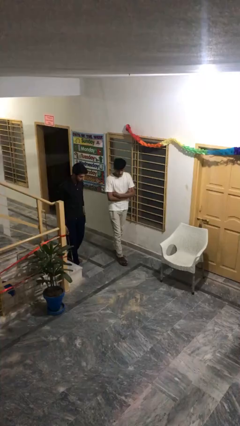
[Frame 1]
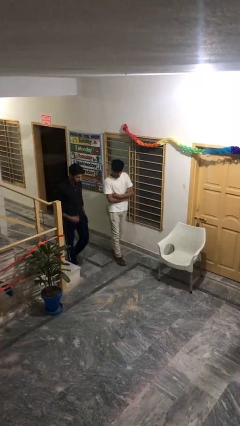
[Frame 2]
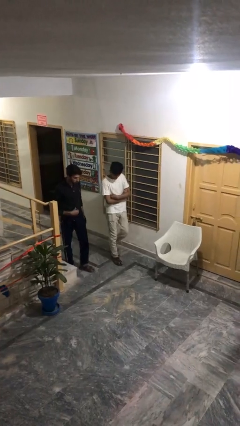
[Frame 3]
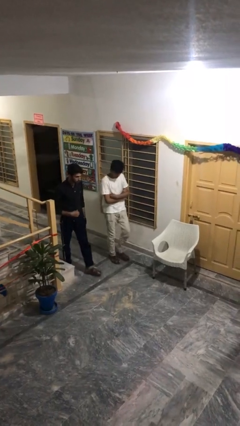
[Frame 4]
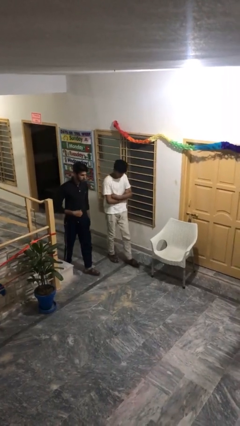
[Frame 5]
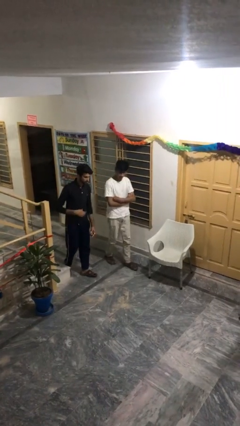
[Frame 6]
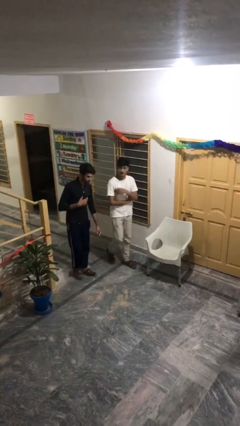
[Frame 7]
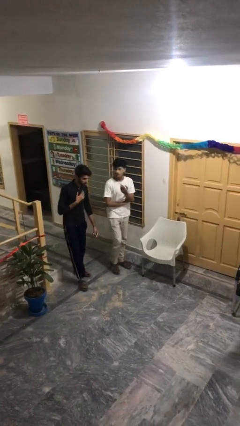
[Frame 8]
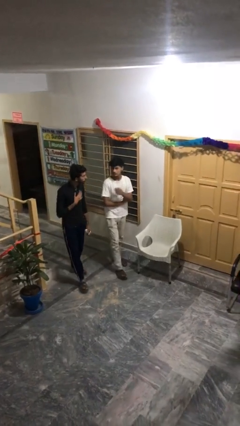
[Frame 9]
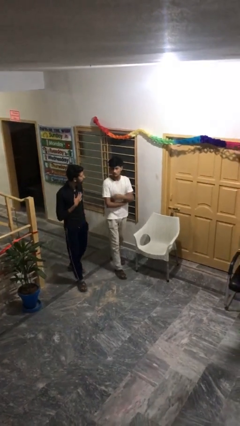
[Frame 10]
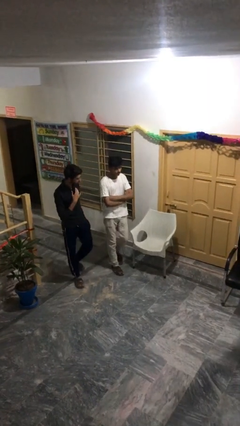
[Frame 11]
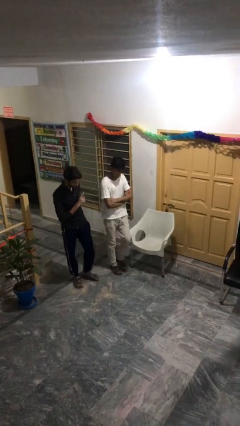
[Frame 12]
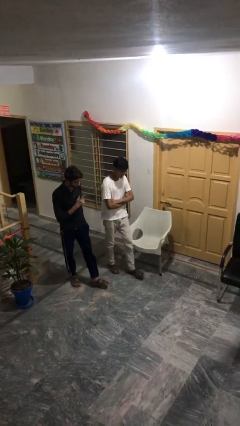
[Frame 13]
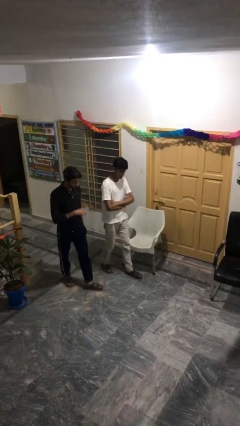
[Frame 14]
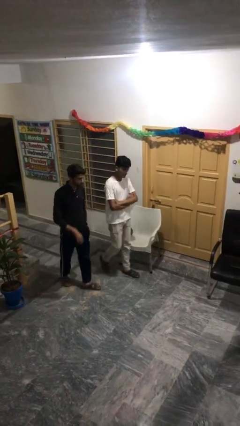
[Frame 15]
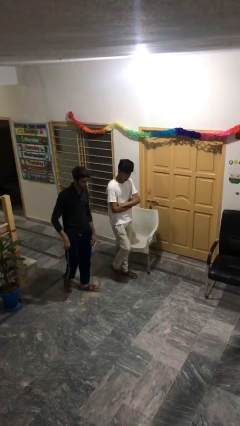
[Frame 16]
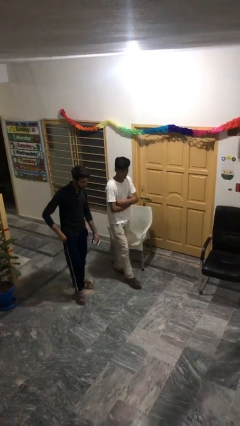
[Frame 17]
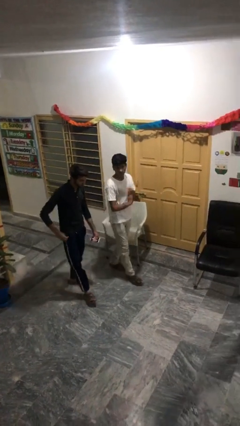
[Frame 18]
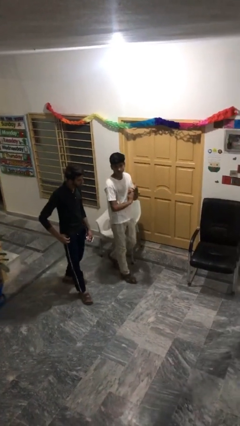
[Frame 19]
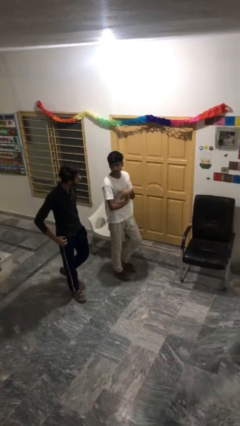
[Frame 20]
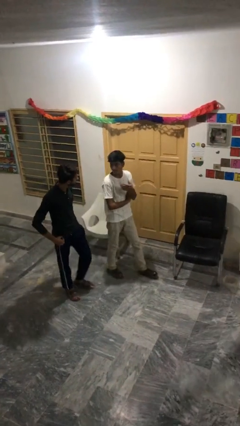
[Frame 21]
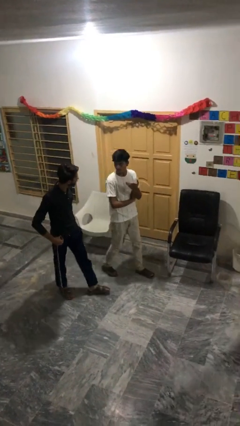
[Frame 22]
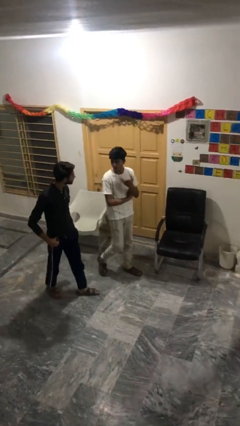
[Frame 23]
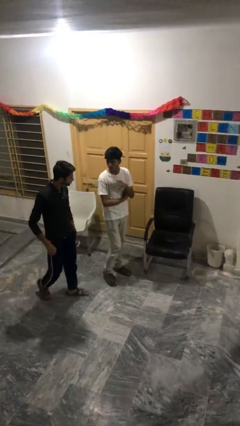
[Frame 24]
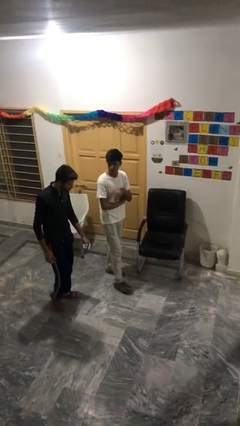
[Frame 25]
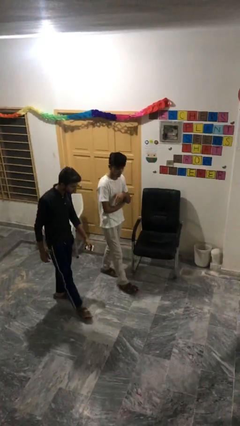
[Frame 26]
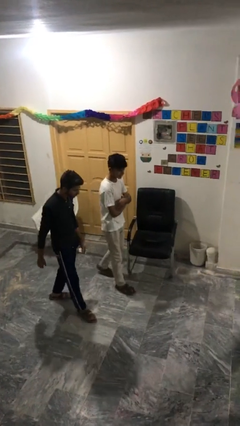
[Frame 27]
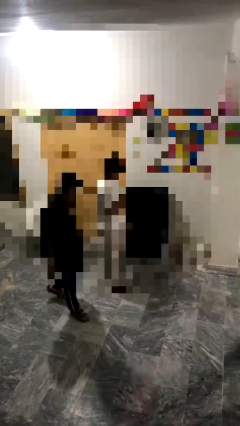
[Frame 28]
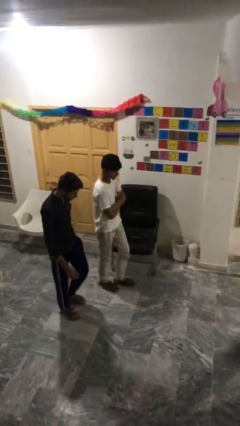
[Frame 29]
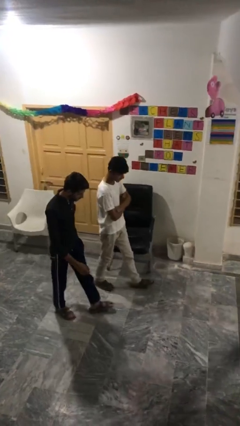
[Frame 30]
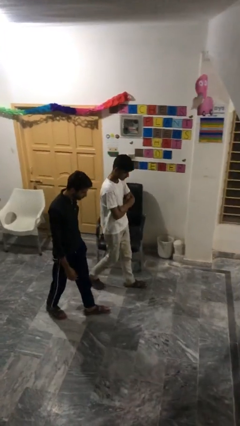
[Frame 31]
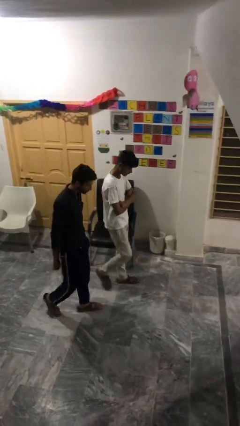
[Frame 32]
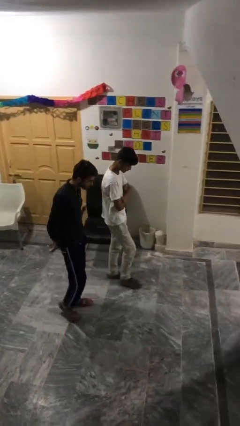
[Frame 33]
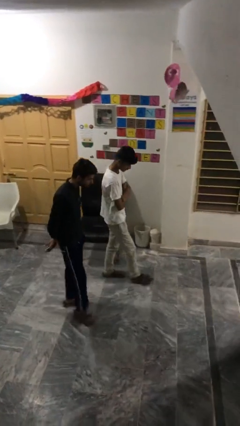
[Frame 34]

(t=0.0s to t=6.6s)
person talks to person

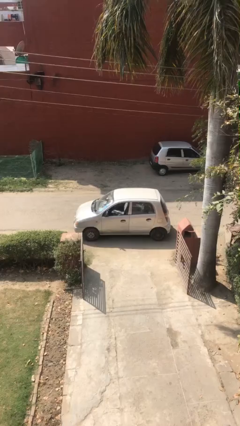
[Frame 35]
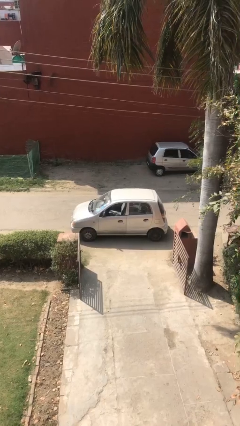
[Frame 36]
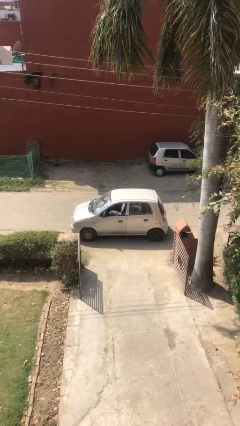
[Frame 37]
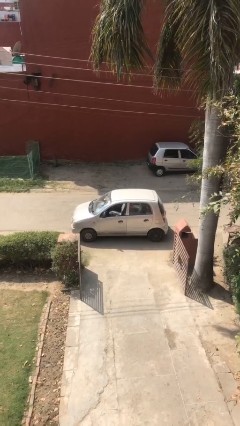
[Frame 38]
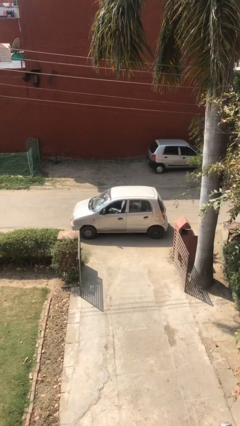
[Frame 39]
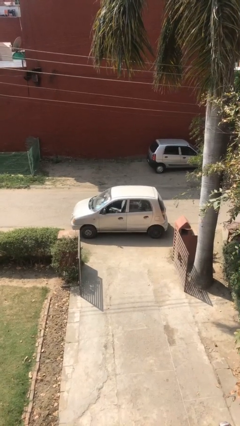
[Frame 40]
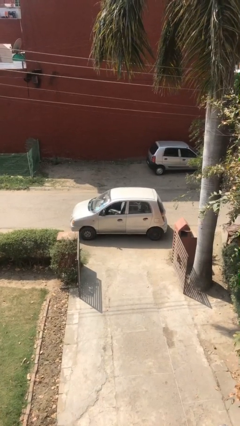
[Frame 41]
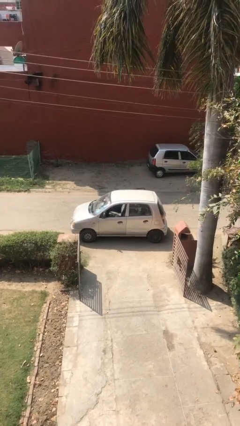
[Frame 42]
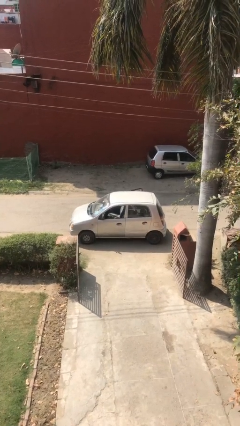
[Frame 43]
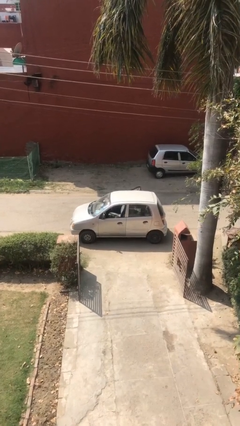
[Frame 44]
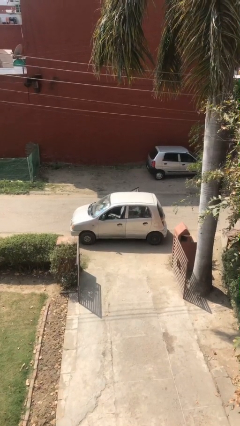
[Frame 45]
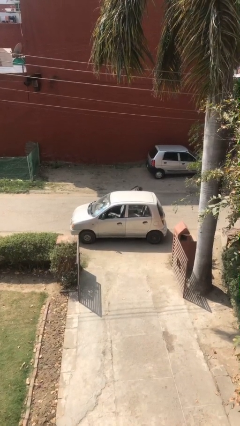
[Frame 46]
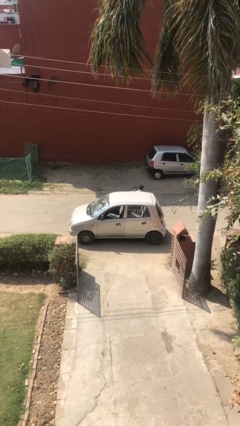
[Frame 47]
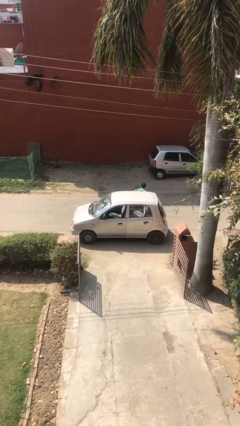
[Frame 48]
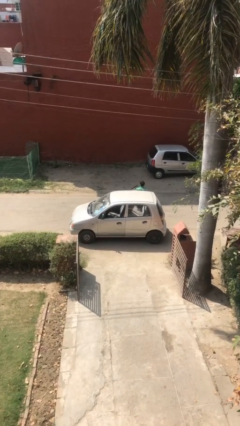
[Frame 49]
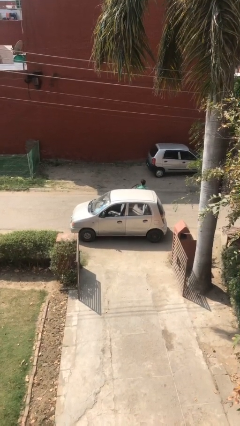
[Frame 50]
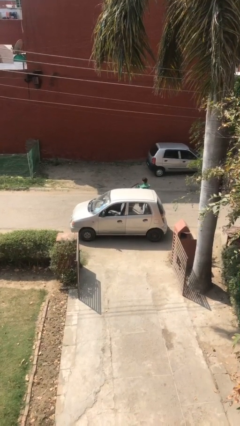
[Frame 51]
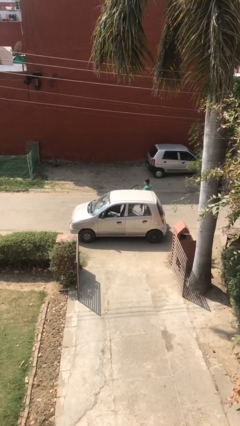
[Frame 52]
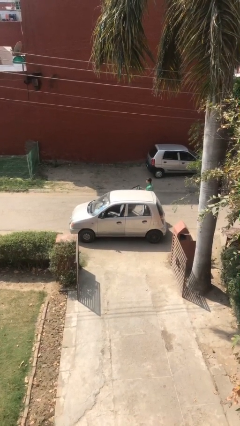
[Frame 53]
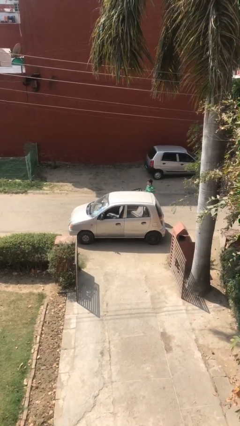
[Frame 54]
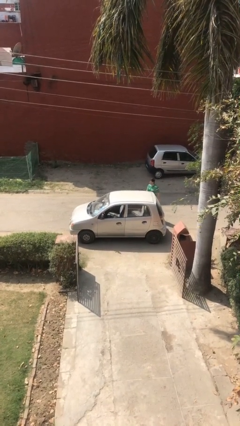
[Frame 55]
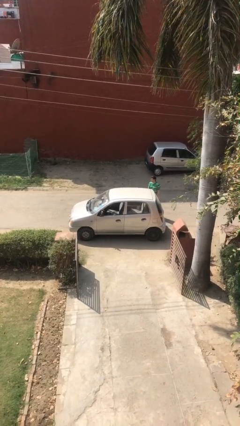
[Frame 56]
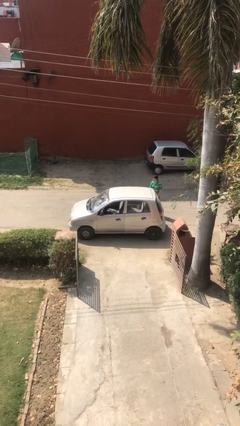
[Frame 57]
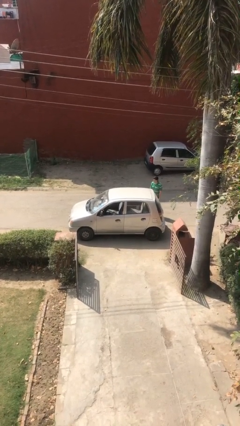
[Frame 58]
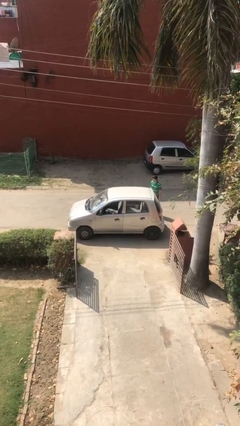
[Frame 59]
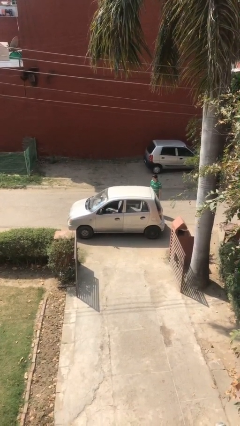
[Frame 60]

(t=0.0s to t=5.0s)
car drops off person

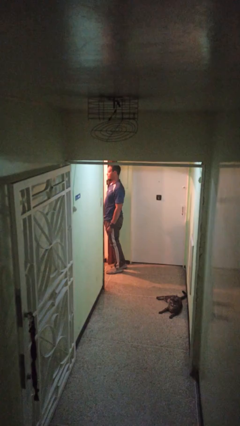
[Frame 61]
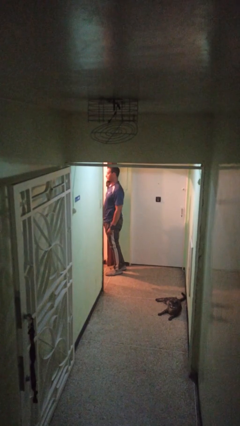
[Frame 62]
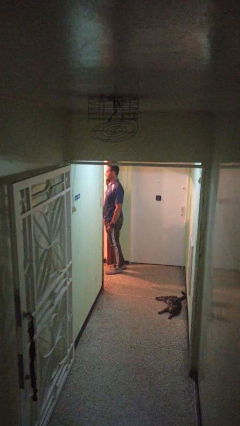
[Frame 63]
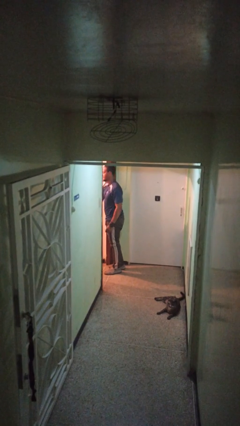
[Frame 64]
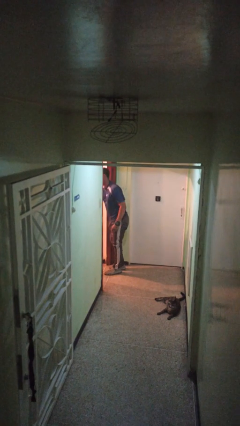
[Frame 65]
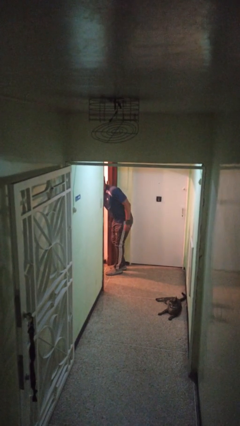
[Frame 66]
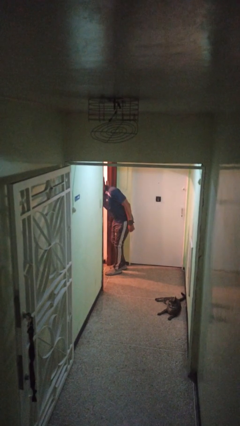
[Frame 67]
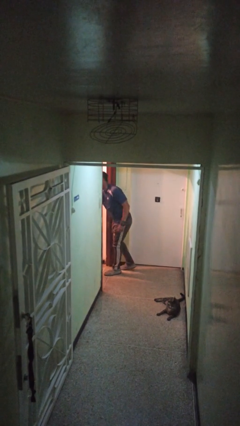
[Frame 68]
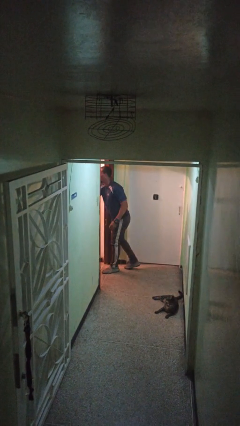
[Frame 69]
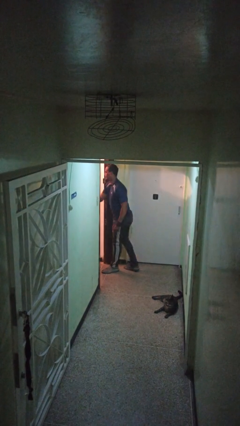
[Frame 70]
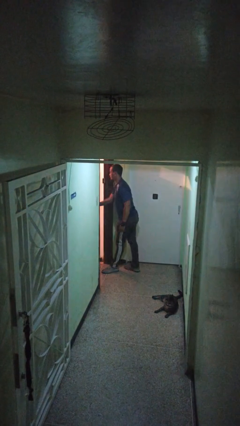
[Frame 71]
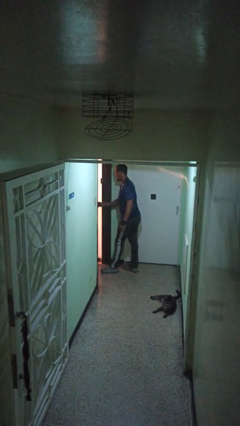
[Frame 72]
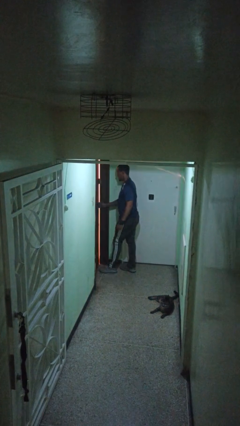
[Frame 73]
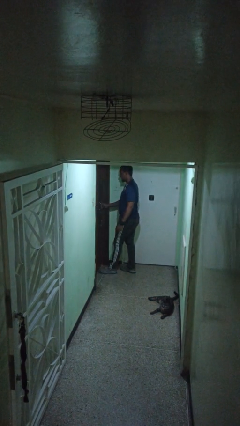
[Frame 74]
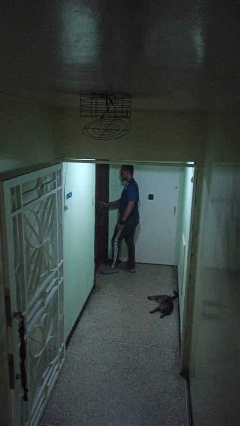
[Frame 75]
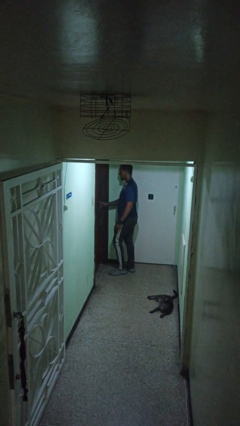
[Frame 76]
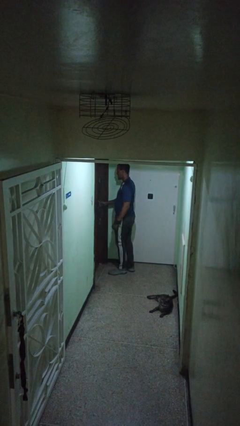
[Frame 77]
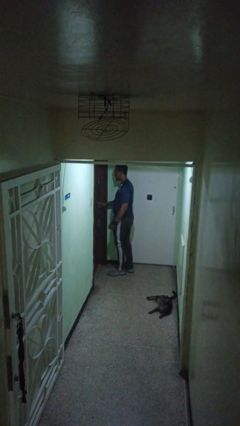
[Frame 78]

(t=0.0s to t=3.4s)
person closes facility door

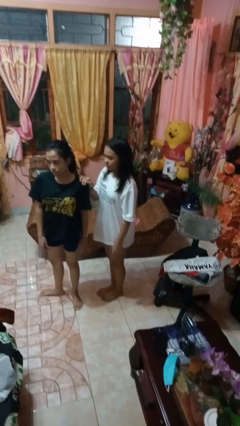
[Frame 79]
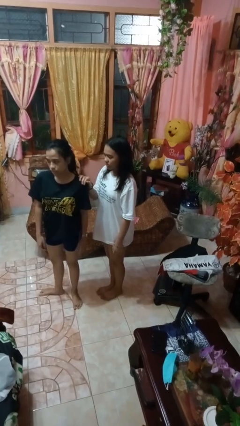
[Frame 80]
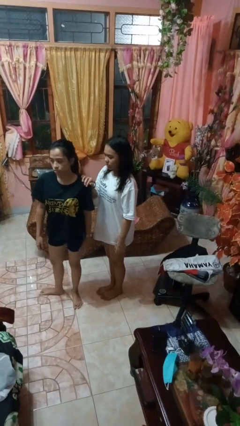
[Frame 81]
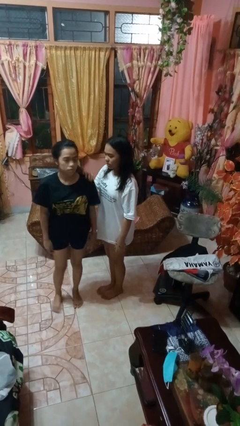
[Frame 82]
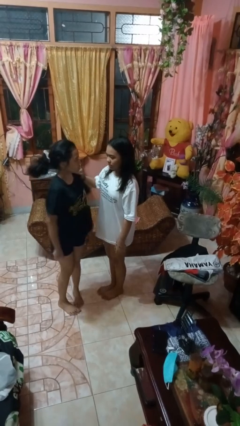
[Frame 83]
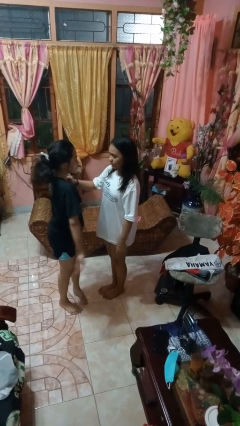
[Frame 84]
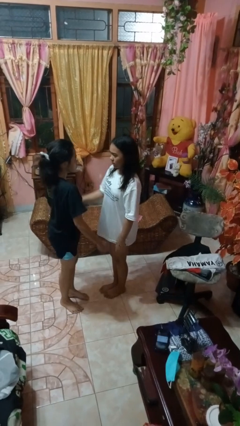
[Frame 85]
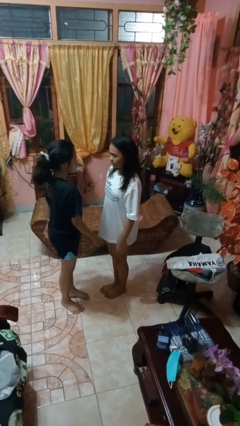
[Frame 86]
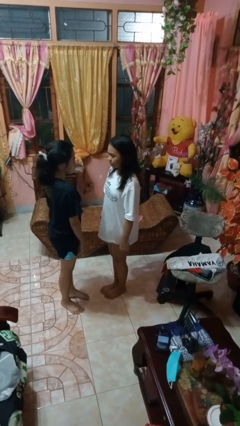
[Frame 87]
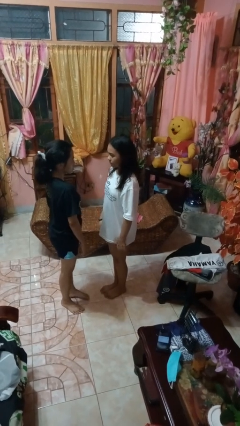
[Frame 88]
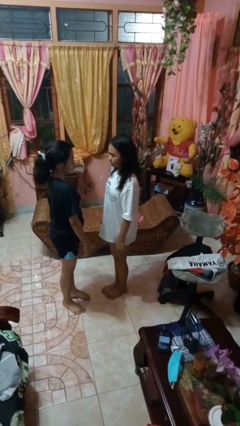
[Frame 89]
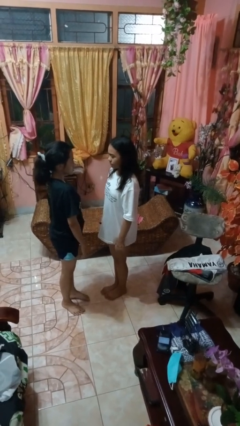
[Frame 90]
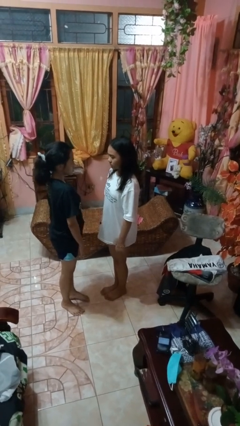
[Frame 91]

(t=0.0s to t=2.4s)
person spins person around

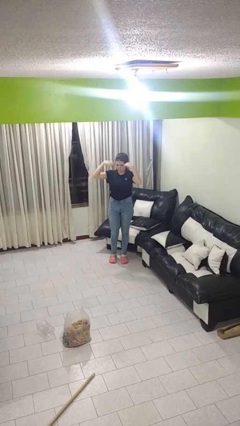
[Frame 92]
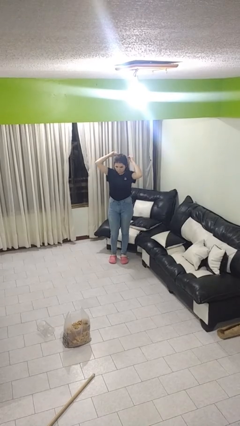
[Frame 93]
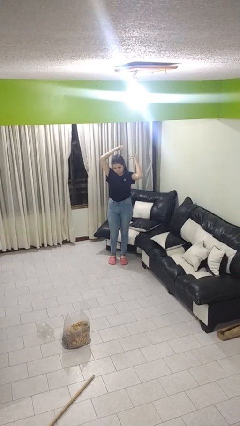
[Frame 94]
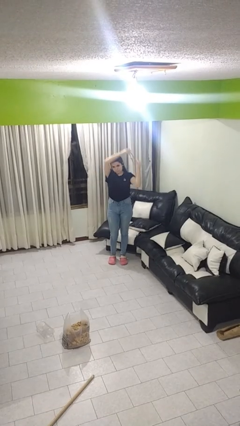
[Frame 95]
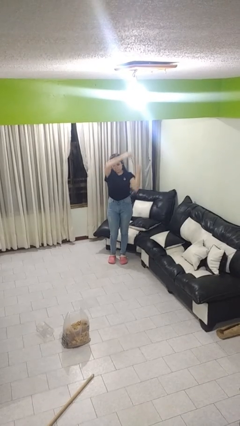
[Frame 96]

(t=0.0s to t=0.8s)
person takes off necklace
